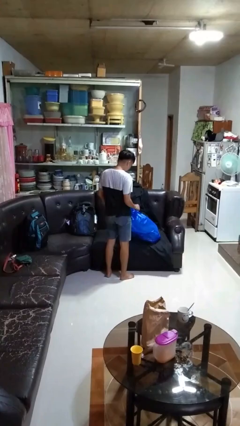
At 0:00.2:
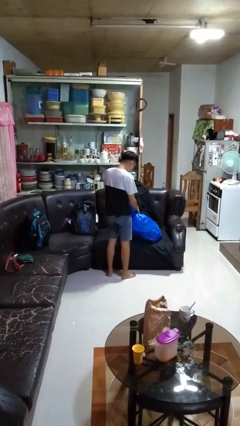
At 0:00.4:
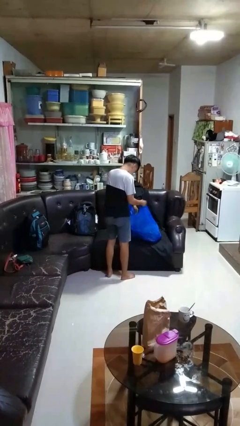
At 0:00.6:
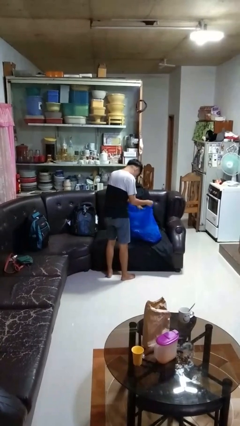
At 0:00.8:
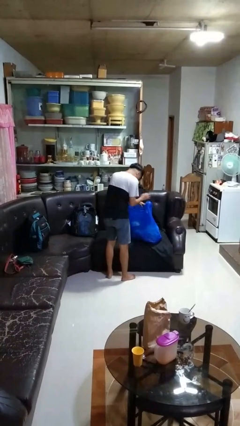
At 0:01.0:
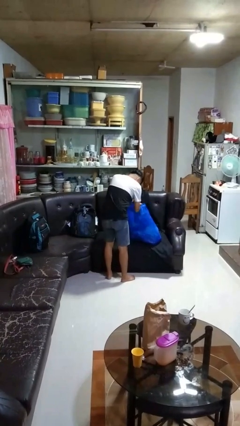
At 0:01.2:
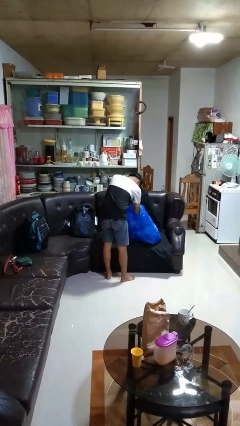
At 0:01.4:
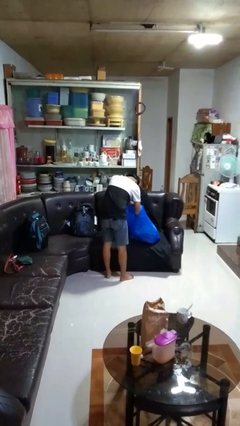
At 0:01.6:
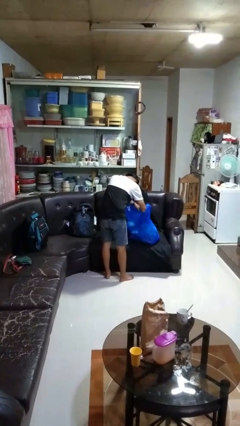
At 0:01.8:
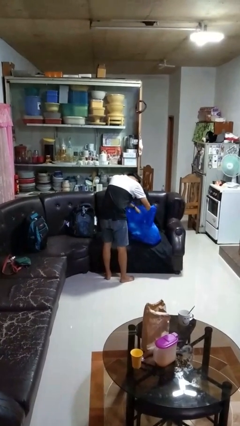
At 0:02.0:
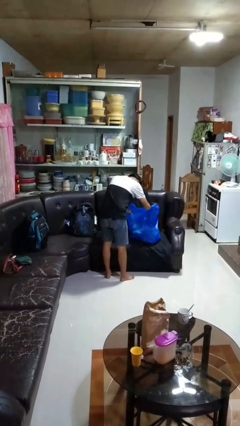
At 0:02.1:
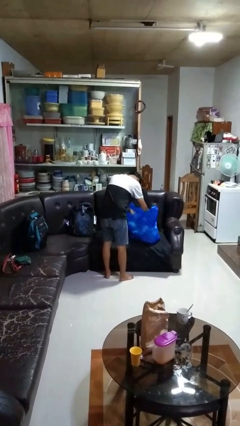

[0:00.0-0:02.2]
person searches in bag

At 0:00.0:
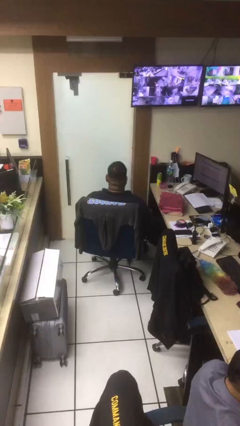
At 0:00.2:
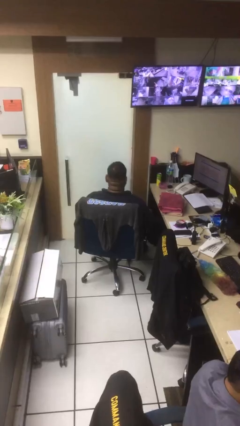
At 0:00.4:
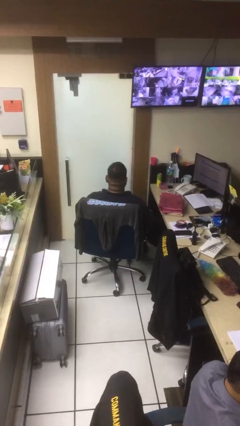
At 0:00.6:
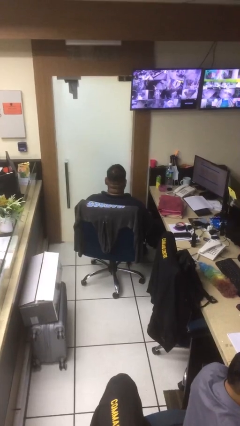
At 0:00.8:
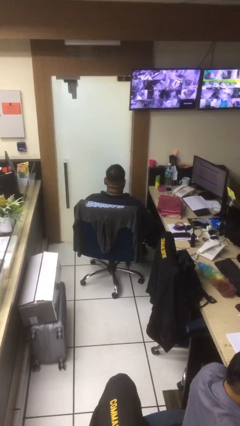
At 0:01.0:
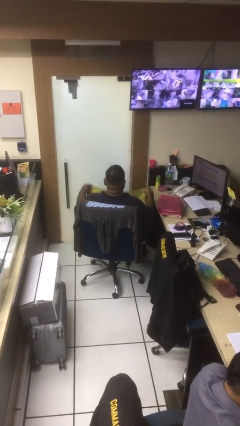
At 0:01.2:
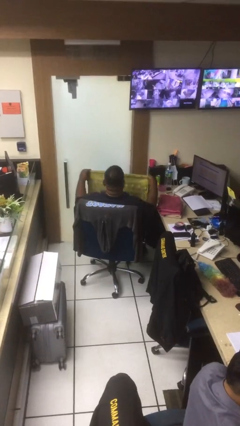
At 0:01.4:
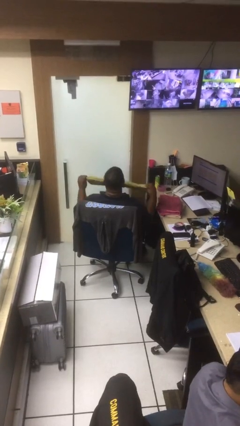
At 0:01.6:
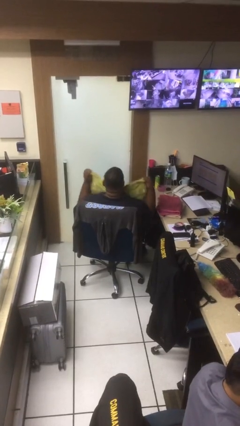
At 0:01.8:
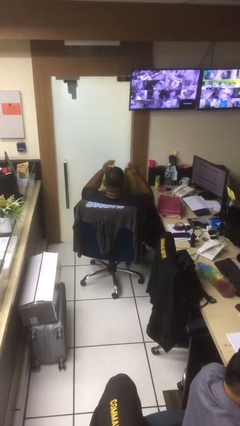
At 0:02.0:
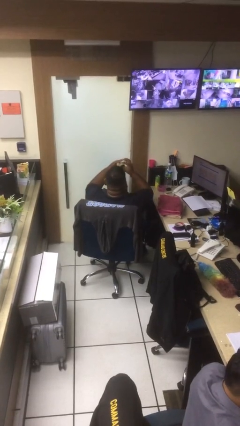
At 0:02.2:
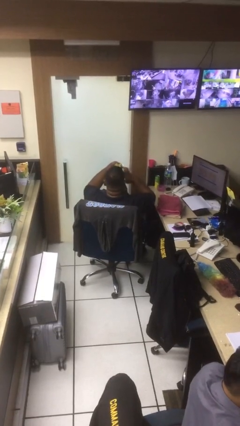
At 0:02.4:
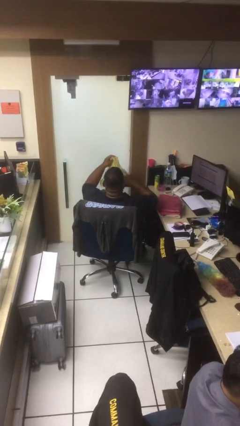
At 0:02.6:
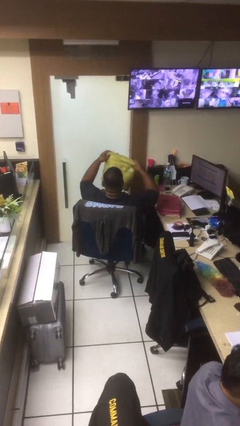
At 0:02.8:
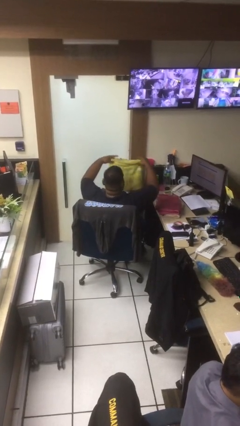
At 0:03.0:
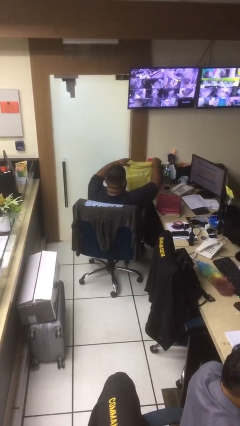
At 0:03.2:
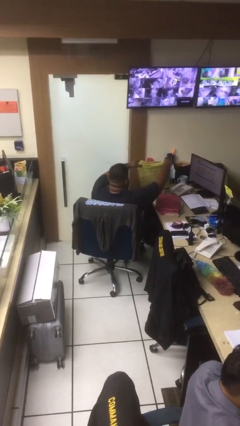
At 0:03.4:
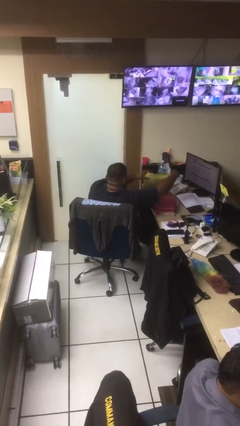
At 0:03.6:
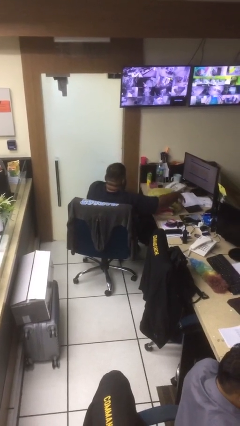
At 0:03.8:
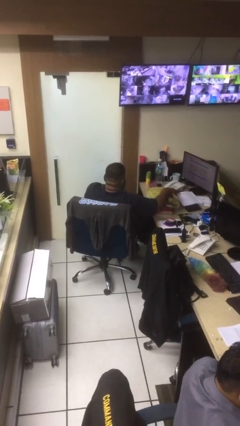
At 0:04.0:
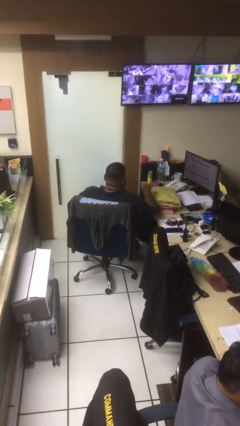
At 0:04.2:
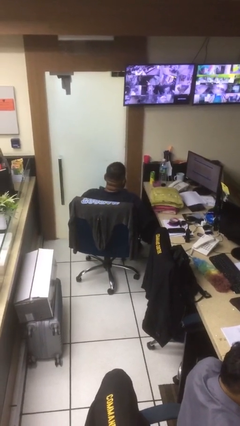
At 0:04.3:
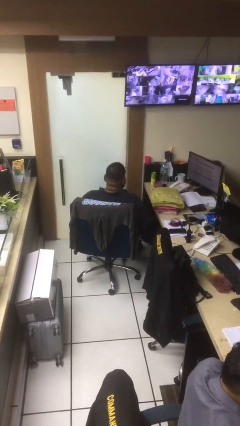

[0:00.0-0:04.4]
person folds towel

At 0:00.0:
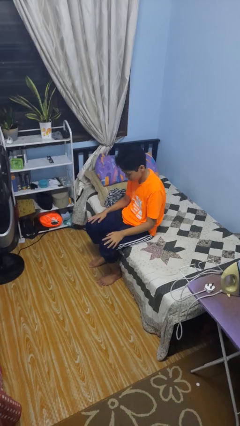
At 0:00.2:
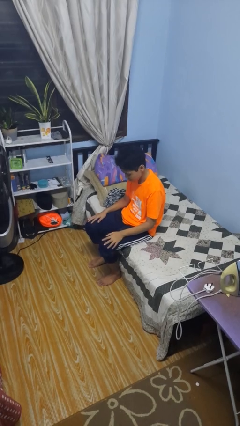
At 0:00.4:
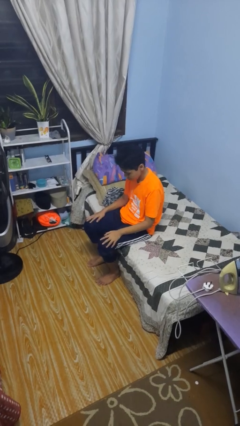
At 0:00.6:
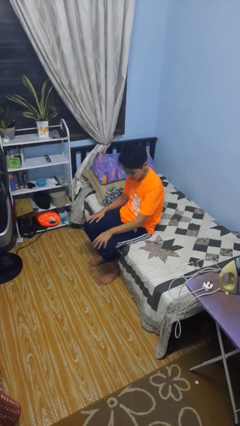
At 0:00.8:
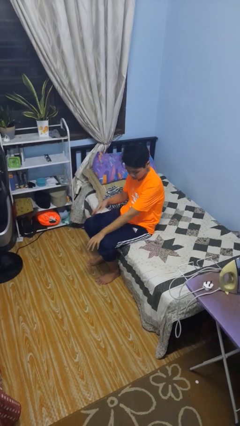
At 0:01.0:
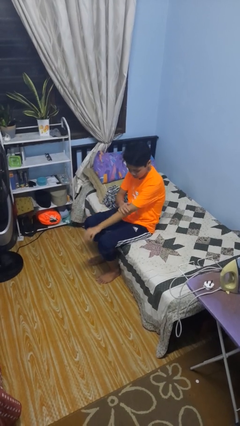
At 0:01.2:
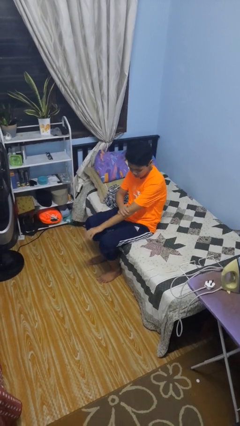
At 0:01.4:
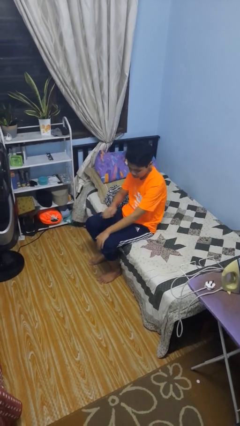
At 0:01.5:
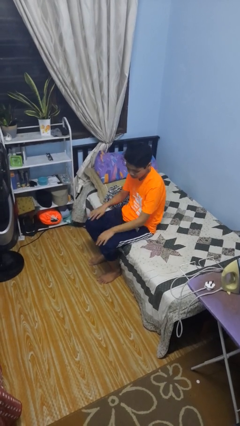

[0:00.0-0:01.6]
person swats bug

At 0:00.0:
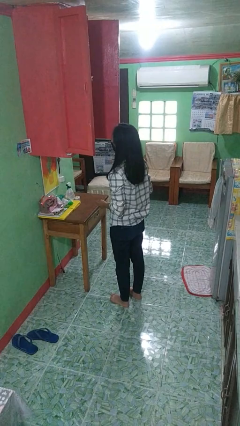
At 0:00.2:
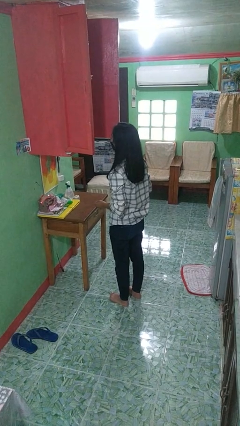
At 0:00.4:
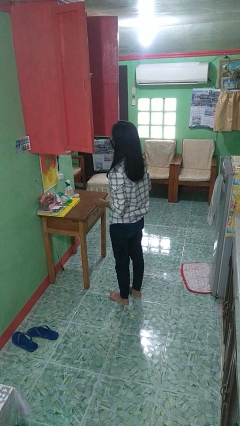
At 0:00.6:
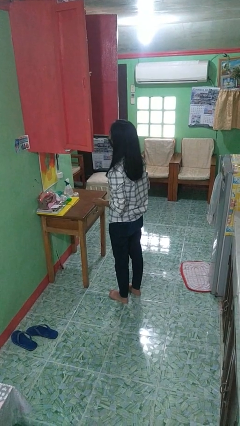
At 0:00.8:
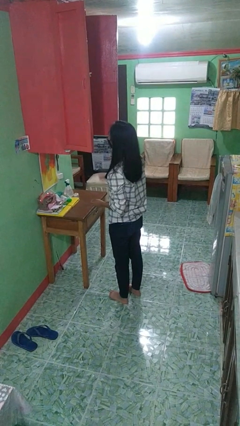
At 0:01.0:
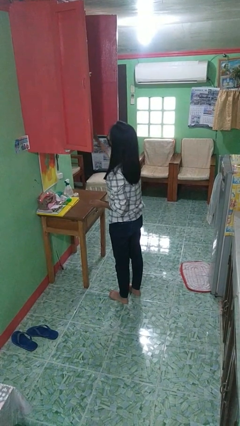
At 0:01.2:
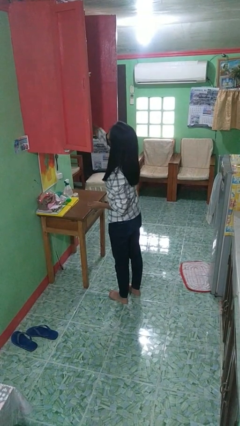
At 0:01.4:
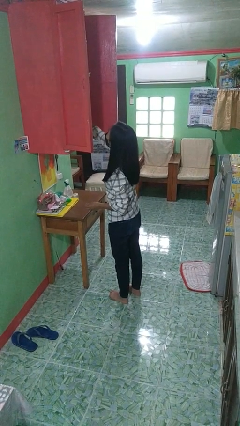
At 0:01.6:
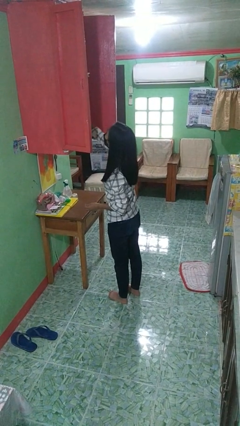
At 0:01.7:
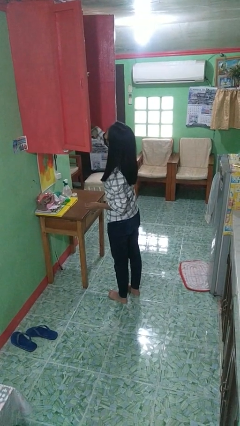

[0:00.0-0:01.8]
person picks up object from cabinet

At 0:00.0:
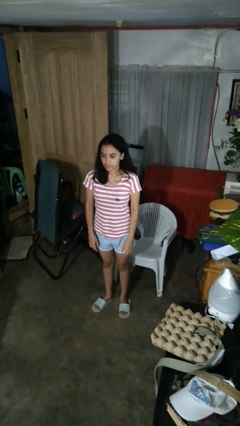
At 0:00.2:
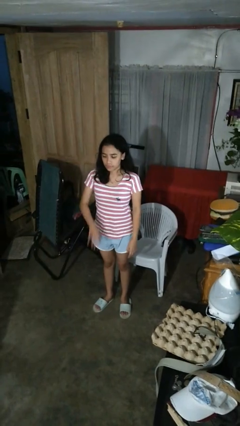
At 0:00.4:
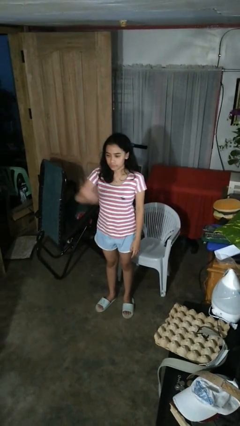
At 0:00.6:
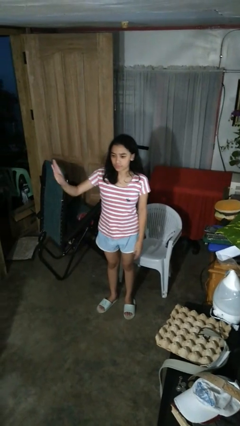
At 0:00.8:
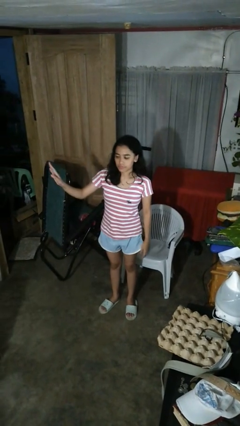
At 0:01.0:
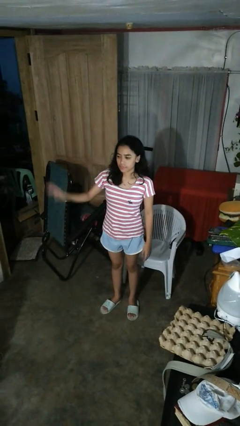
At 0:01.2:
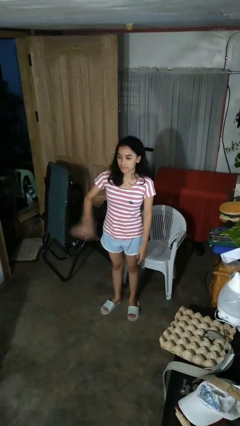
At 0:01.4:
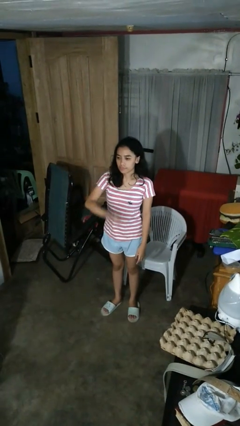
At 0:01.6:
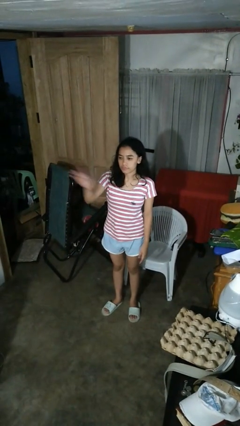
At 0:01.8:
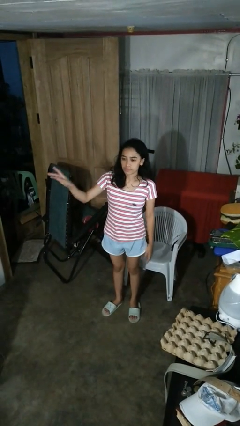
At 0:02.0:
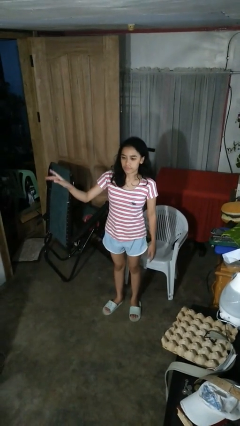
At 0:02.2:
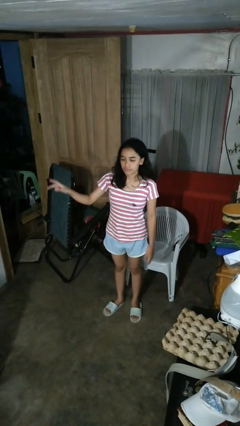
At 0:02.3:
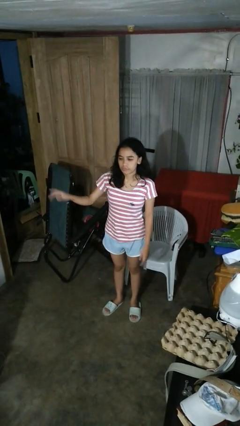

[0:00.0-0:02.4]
person gestures swipe right

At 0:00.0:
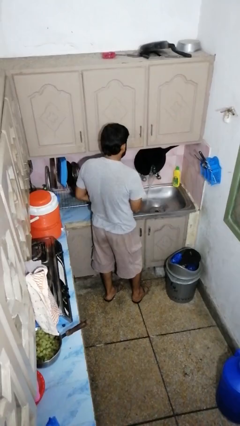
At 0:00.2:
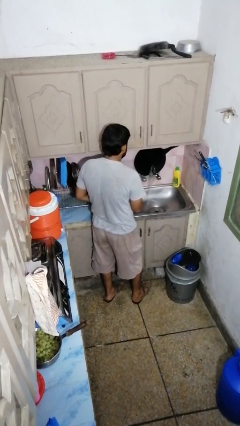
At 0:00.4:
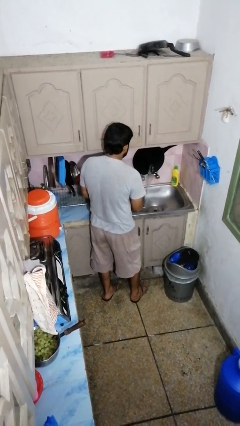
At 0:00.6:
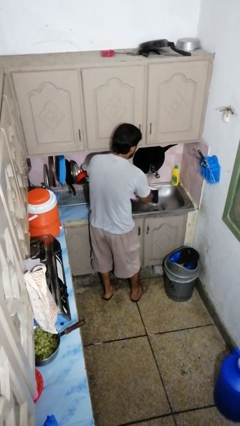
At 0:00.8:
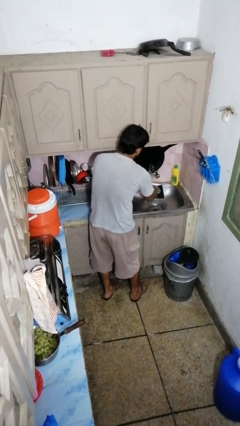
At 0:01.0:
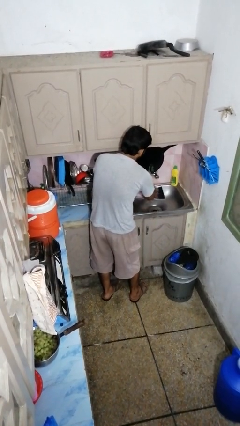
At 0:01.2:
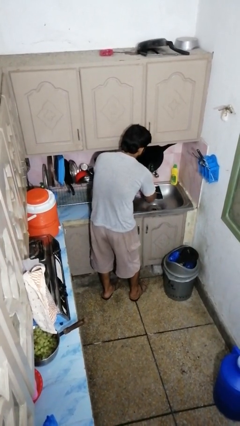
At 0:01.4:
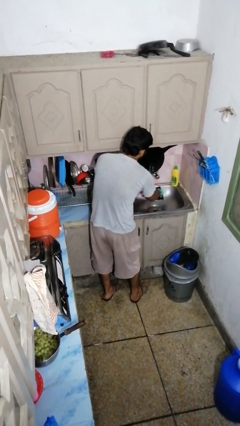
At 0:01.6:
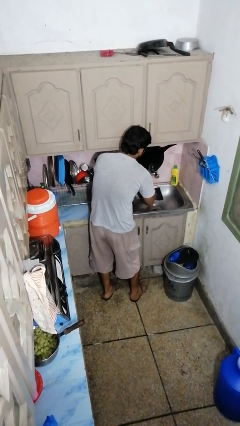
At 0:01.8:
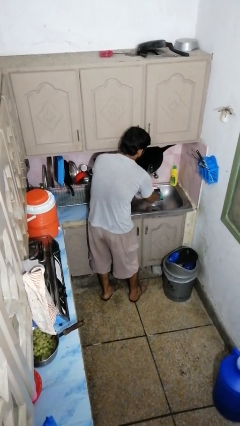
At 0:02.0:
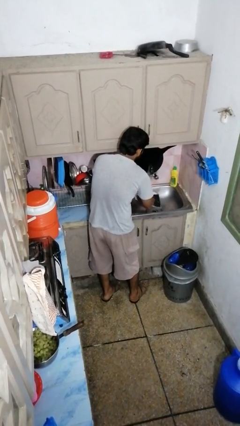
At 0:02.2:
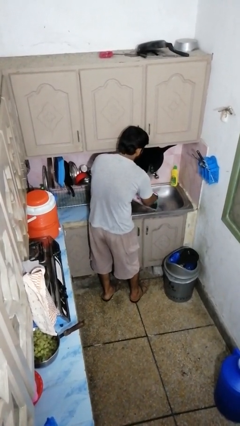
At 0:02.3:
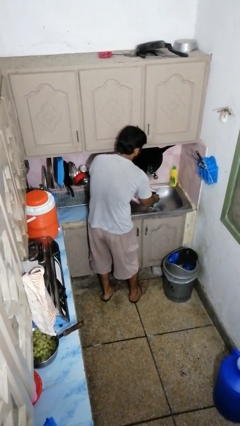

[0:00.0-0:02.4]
person washes dish

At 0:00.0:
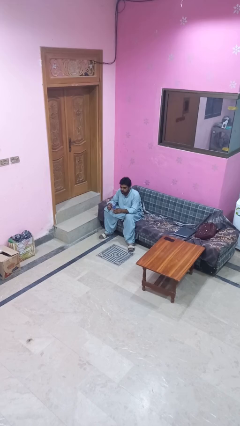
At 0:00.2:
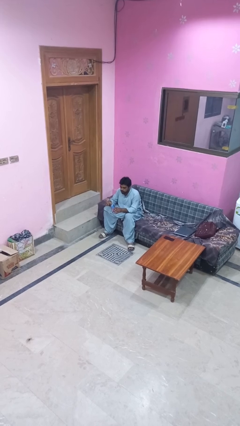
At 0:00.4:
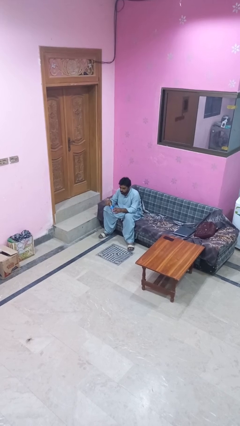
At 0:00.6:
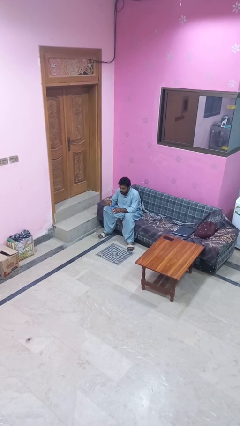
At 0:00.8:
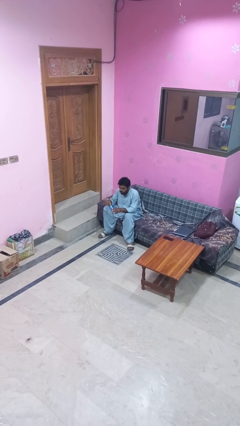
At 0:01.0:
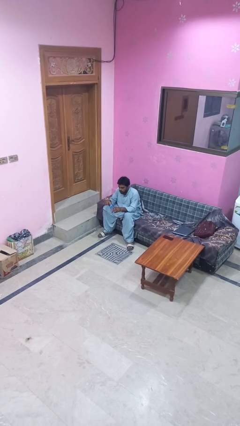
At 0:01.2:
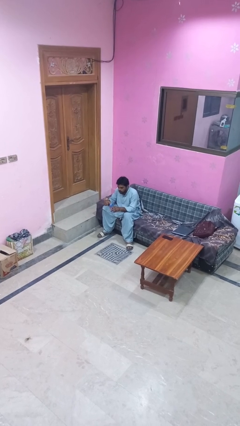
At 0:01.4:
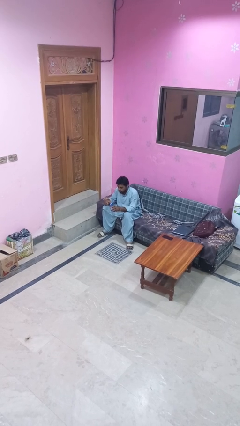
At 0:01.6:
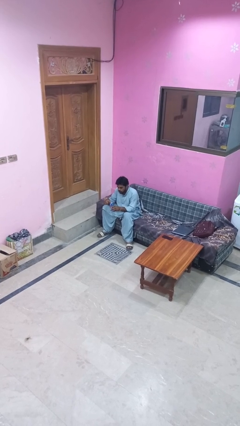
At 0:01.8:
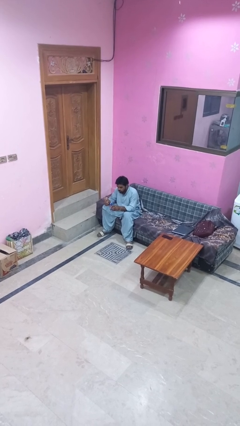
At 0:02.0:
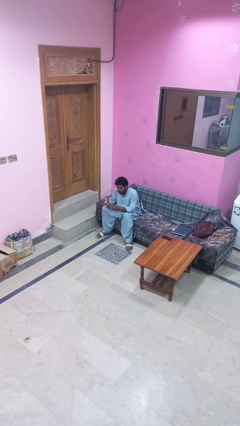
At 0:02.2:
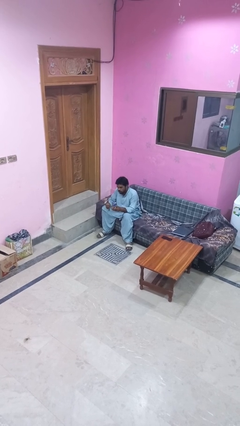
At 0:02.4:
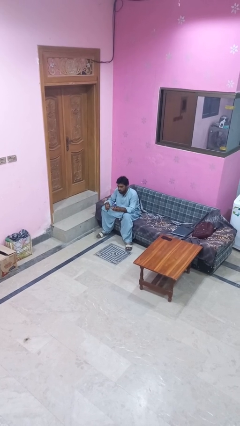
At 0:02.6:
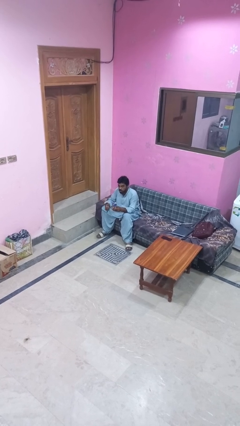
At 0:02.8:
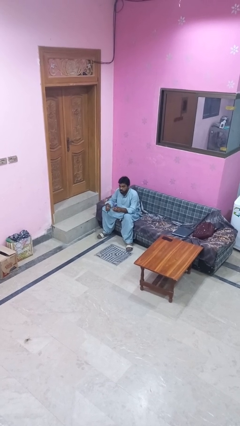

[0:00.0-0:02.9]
person opens can with can opener
